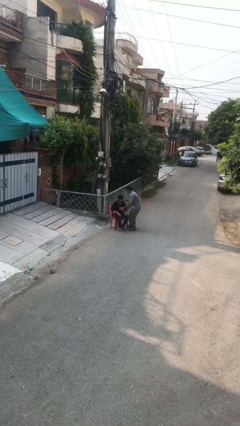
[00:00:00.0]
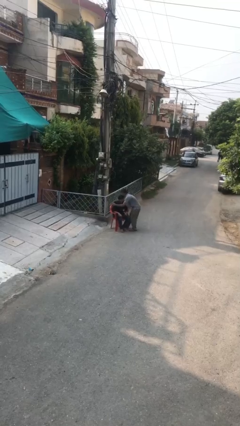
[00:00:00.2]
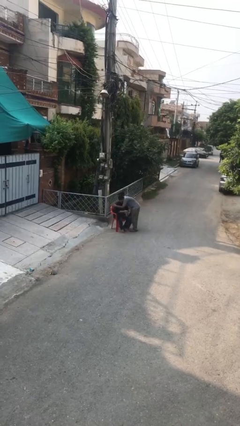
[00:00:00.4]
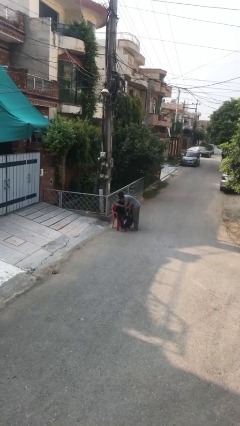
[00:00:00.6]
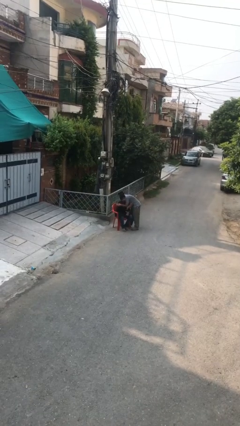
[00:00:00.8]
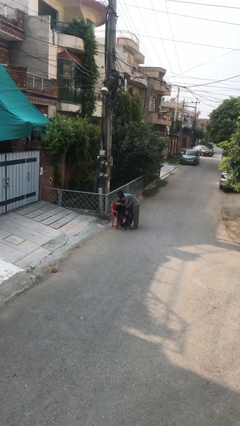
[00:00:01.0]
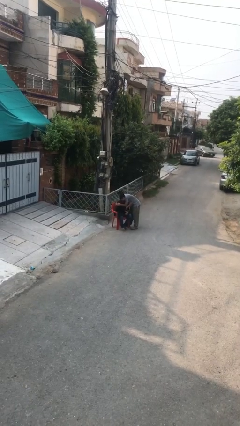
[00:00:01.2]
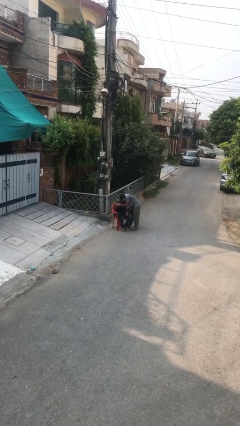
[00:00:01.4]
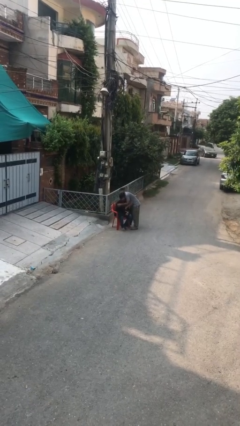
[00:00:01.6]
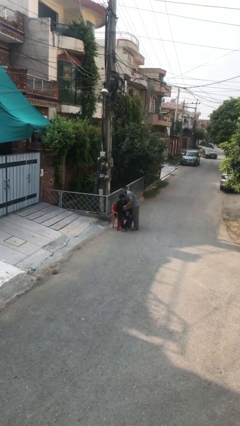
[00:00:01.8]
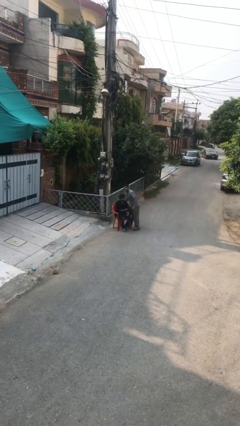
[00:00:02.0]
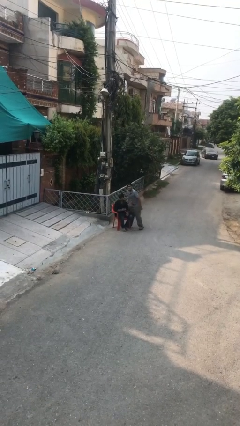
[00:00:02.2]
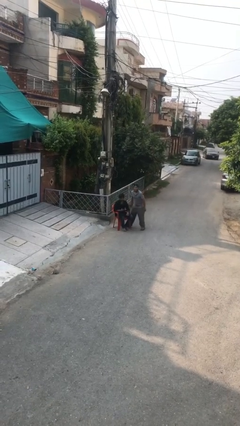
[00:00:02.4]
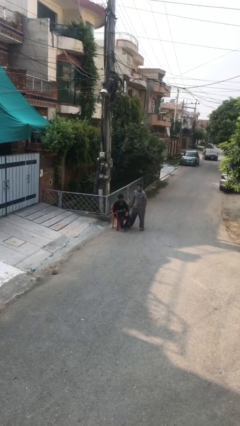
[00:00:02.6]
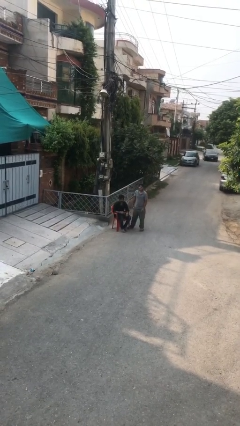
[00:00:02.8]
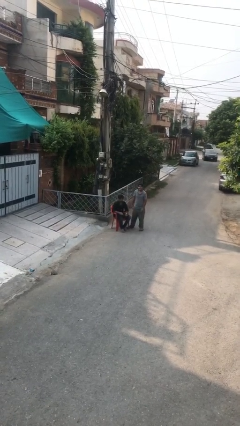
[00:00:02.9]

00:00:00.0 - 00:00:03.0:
person embraces person

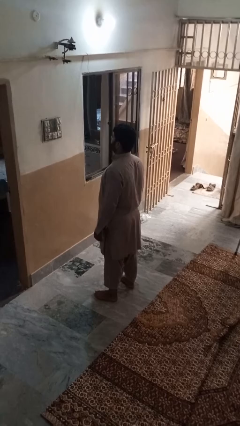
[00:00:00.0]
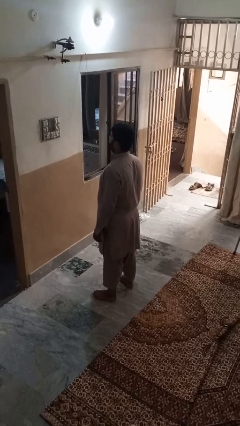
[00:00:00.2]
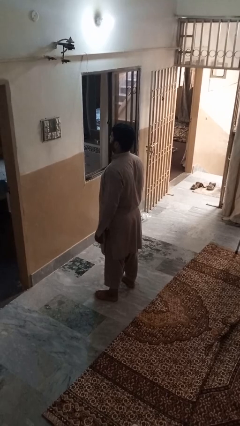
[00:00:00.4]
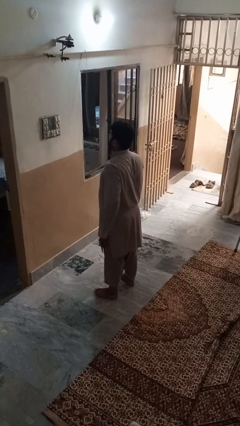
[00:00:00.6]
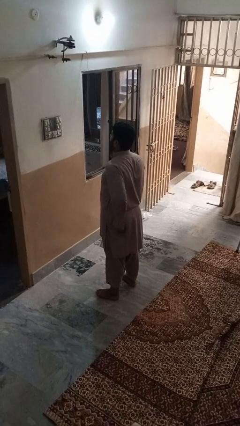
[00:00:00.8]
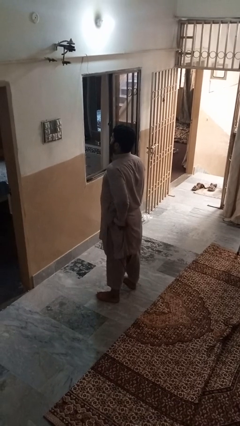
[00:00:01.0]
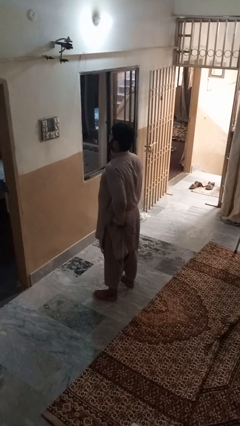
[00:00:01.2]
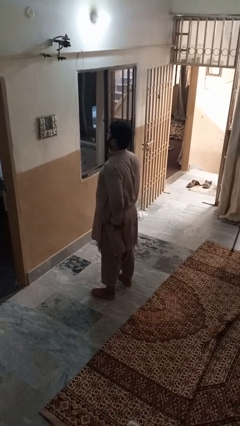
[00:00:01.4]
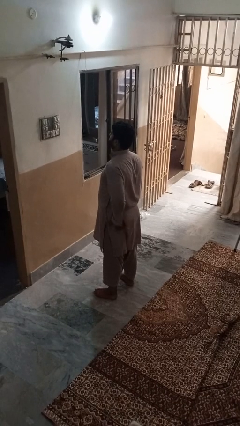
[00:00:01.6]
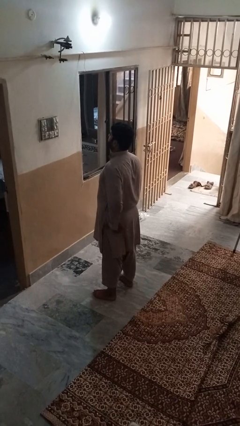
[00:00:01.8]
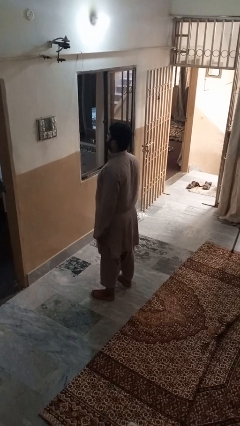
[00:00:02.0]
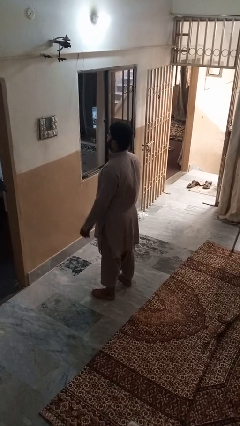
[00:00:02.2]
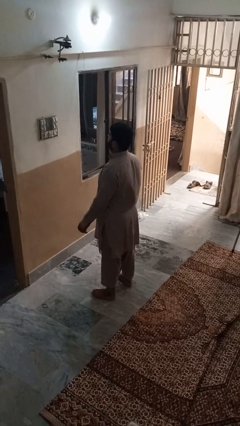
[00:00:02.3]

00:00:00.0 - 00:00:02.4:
person wiggles hips

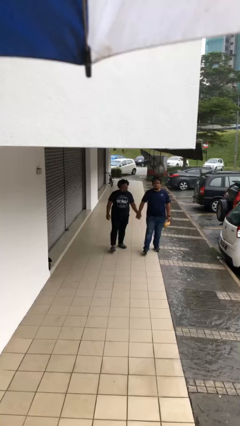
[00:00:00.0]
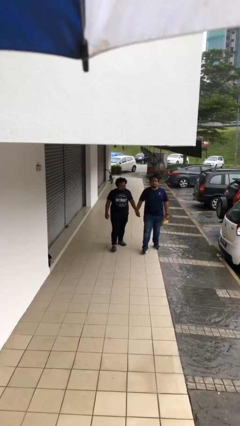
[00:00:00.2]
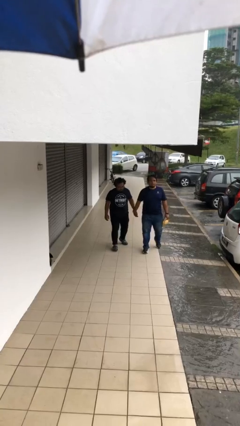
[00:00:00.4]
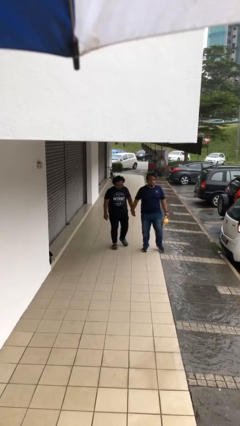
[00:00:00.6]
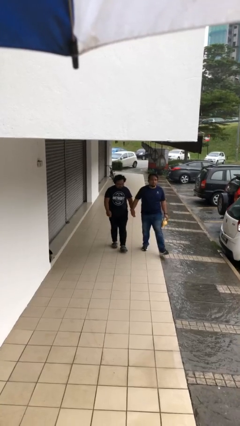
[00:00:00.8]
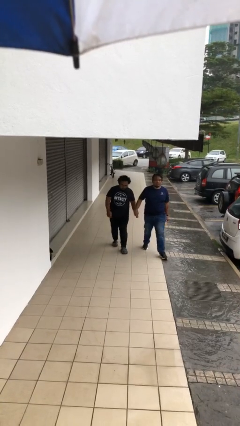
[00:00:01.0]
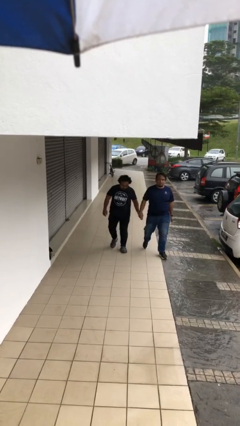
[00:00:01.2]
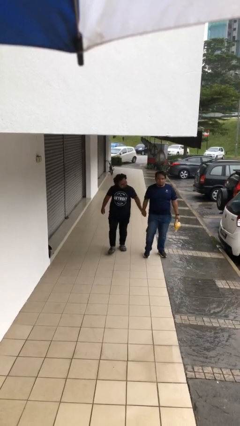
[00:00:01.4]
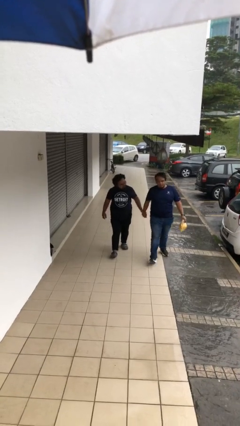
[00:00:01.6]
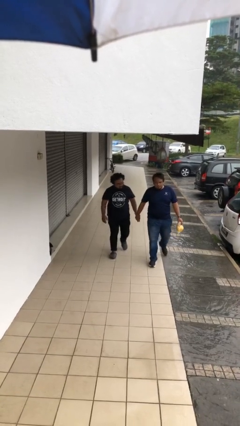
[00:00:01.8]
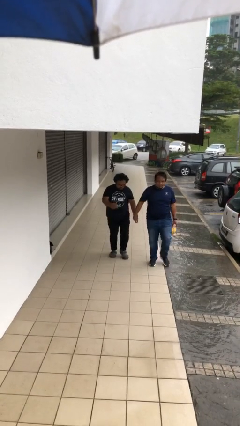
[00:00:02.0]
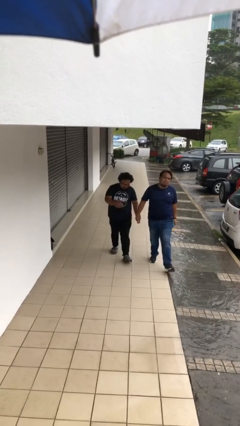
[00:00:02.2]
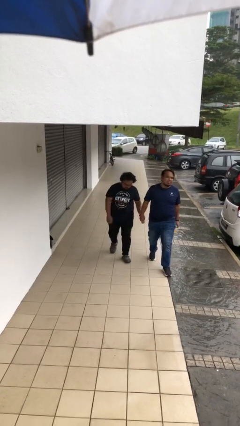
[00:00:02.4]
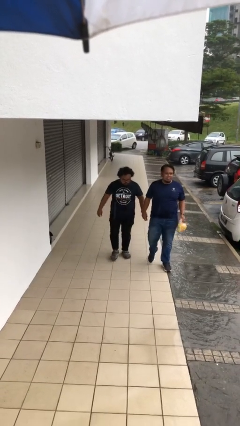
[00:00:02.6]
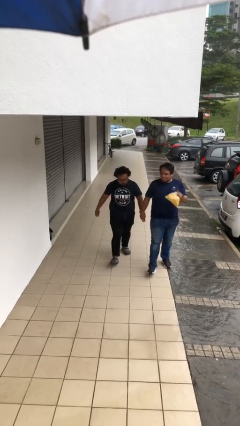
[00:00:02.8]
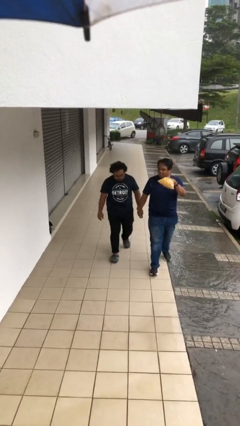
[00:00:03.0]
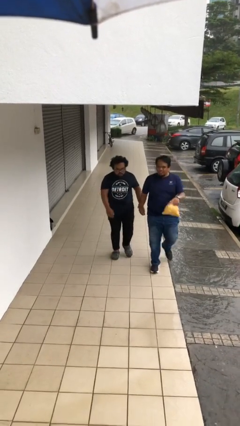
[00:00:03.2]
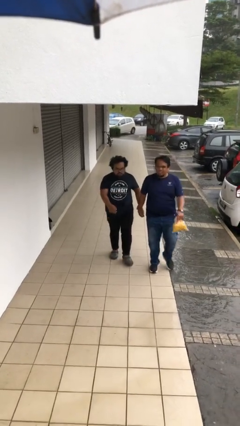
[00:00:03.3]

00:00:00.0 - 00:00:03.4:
person holds hand

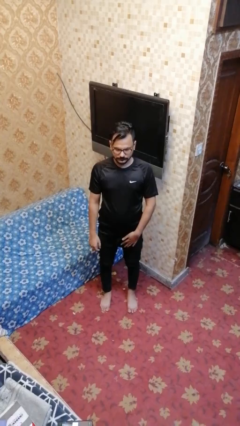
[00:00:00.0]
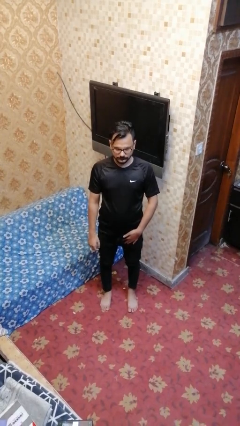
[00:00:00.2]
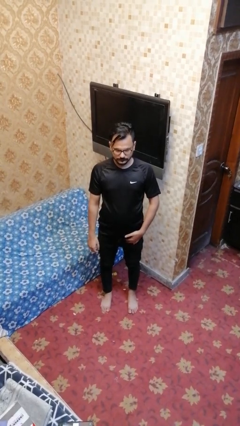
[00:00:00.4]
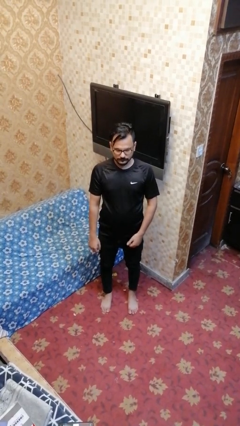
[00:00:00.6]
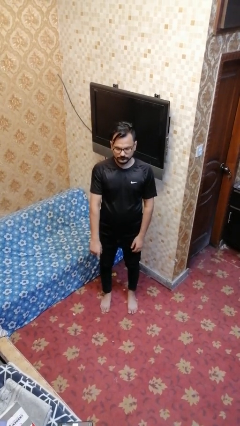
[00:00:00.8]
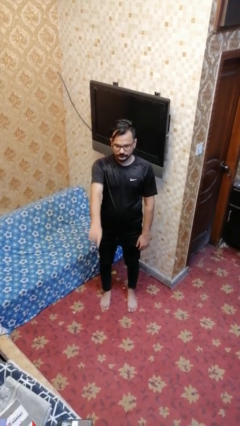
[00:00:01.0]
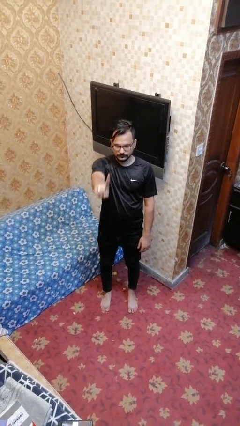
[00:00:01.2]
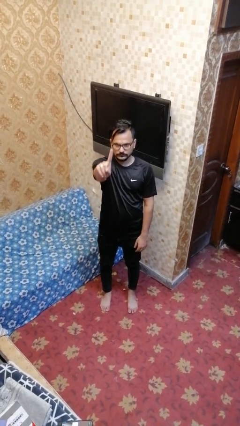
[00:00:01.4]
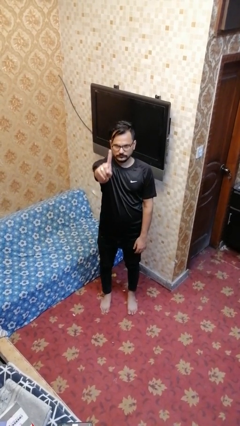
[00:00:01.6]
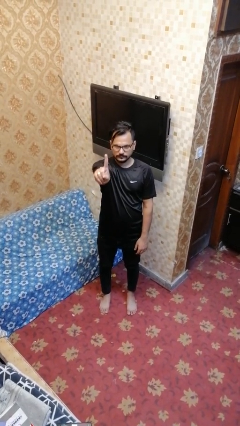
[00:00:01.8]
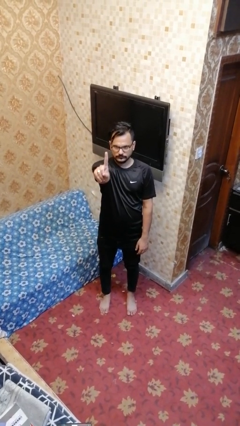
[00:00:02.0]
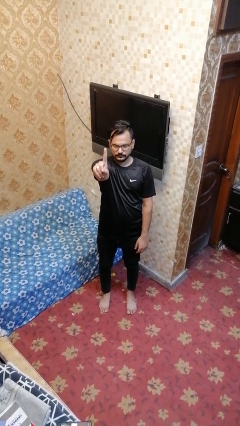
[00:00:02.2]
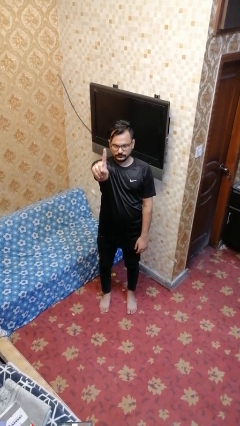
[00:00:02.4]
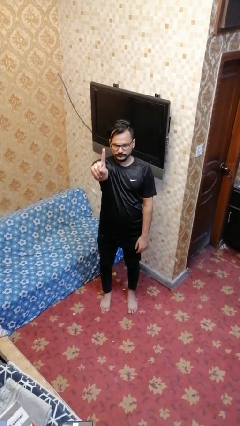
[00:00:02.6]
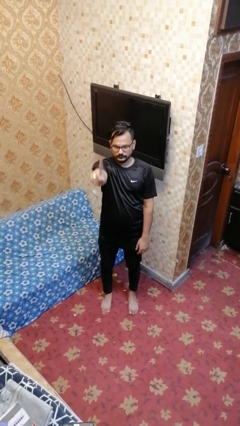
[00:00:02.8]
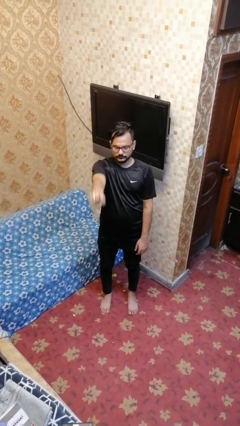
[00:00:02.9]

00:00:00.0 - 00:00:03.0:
person gestures number one

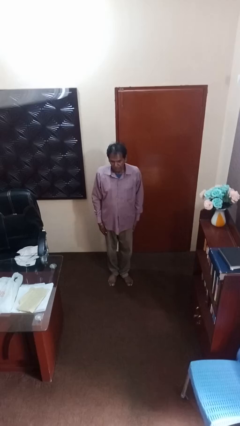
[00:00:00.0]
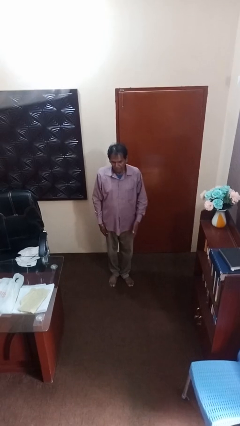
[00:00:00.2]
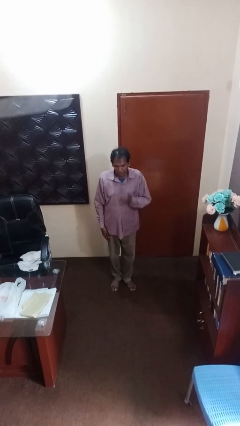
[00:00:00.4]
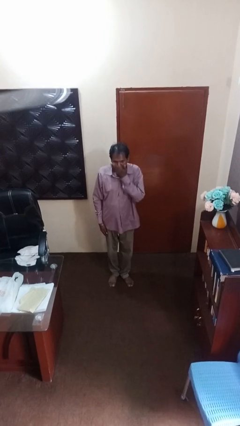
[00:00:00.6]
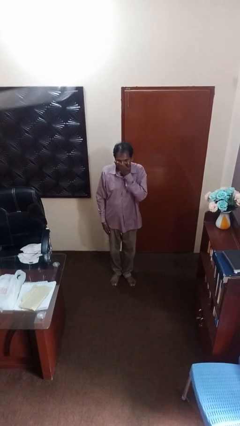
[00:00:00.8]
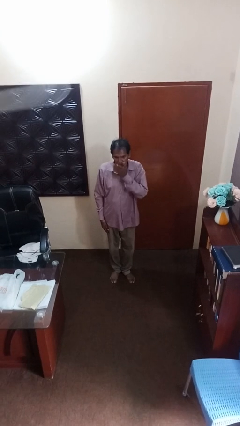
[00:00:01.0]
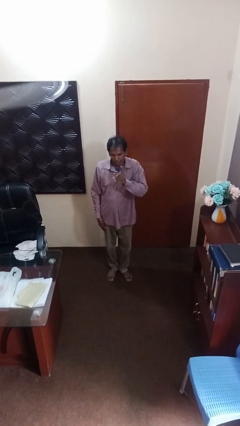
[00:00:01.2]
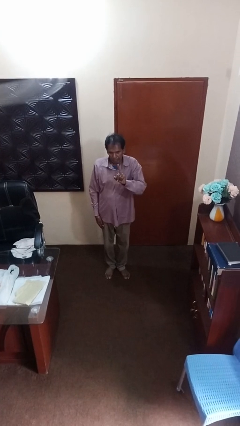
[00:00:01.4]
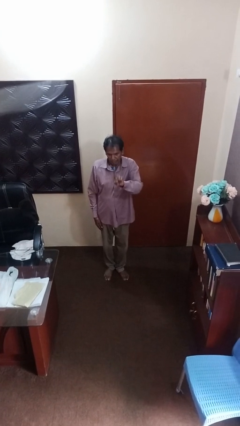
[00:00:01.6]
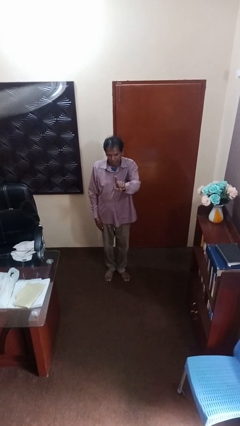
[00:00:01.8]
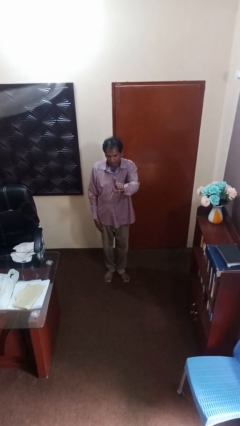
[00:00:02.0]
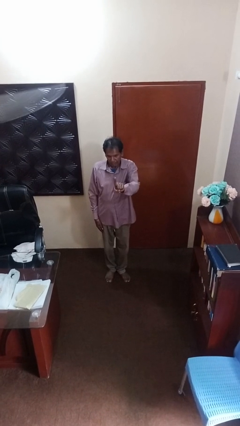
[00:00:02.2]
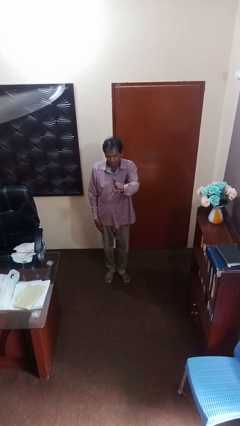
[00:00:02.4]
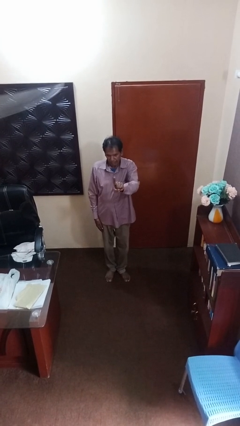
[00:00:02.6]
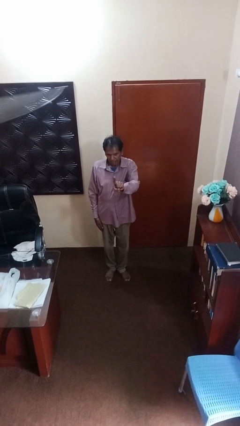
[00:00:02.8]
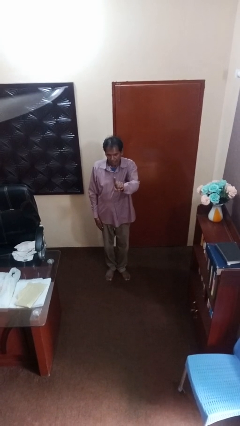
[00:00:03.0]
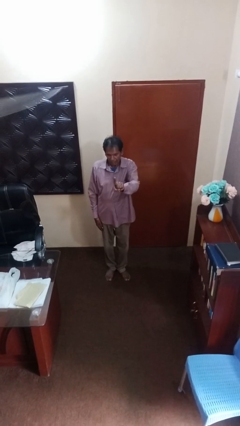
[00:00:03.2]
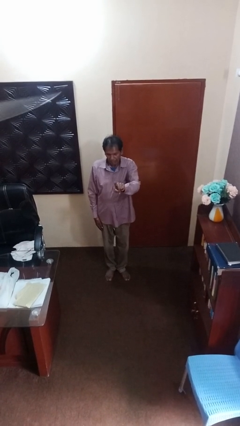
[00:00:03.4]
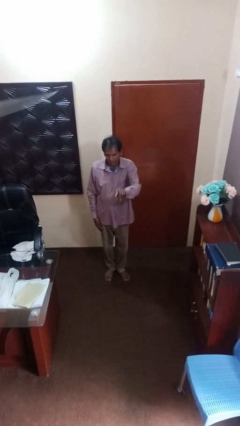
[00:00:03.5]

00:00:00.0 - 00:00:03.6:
person gestures behind me

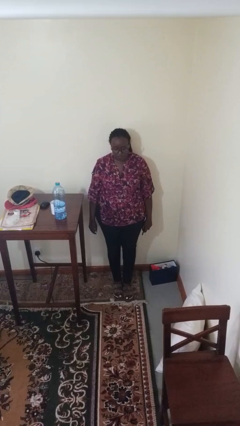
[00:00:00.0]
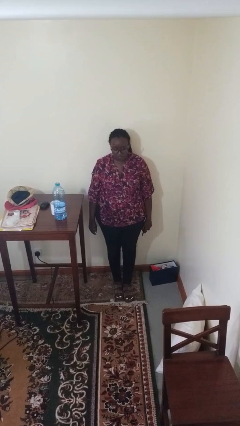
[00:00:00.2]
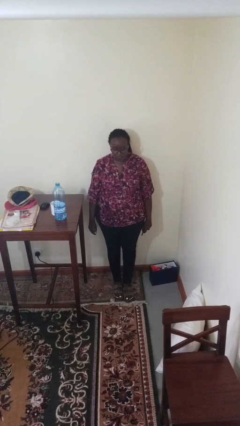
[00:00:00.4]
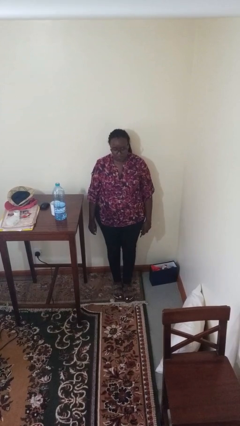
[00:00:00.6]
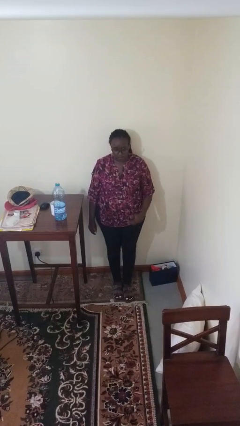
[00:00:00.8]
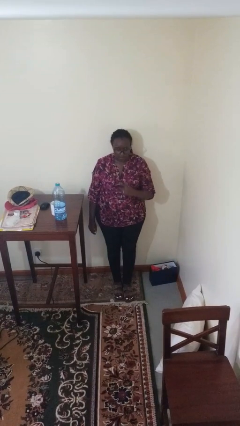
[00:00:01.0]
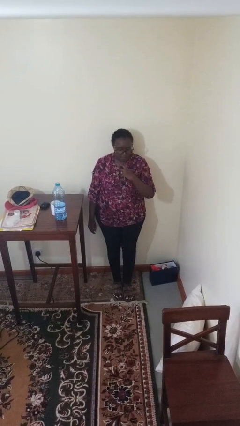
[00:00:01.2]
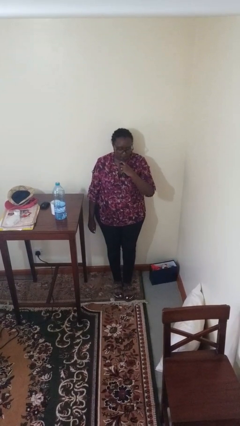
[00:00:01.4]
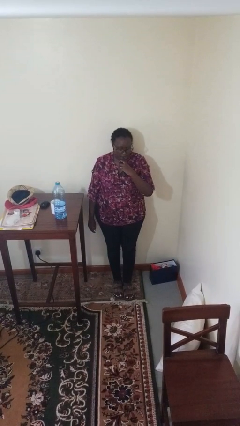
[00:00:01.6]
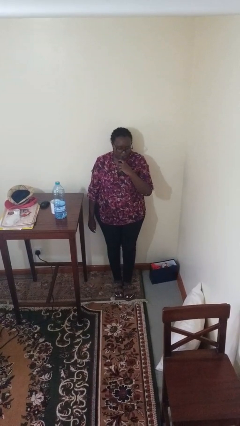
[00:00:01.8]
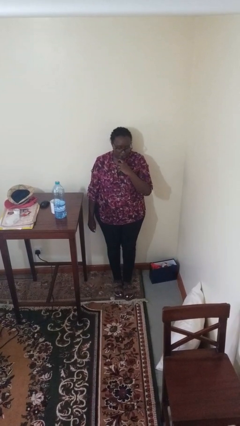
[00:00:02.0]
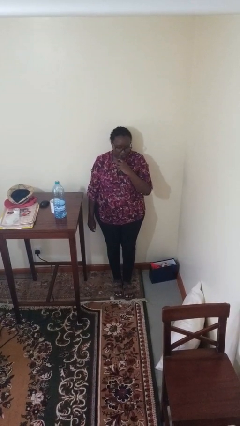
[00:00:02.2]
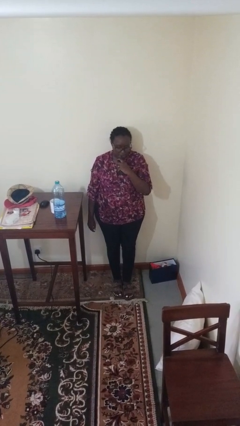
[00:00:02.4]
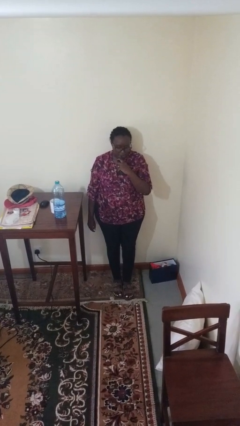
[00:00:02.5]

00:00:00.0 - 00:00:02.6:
person vapes
